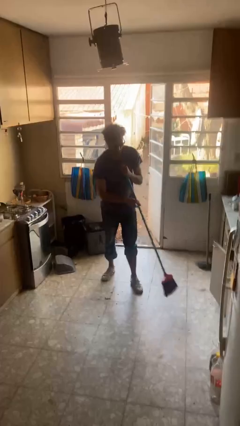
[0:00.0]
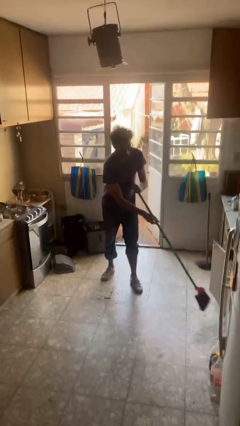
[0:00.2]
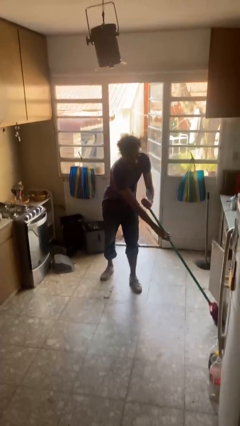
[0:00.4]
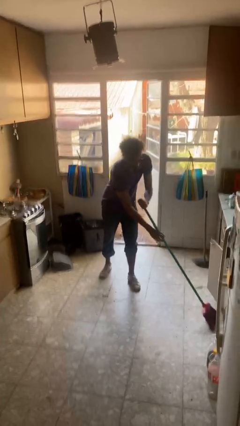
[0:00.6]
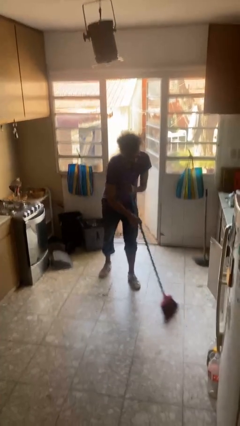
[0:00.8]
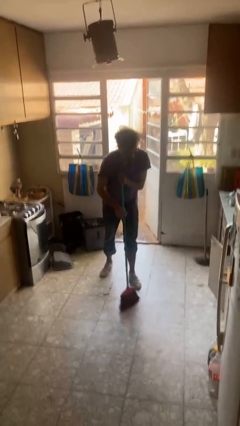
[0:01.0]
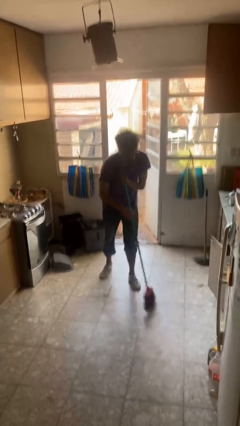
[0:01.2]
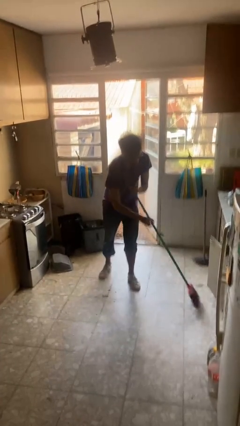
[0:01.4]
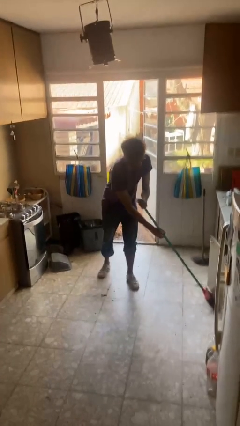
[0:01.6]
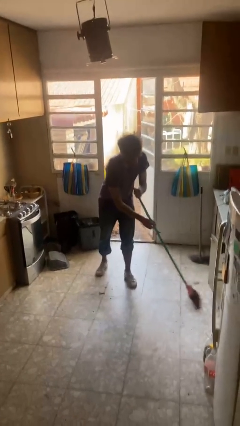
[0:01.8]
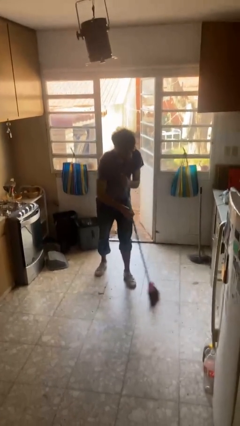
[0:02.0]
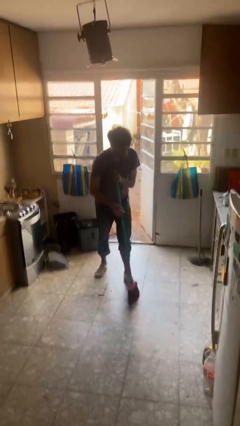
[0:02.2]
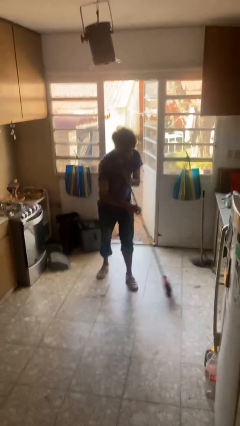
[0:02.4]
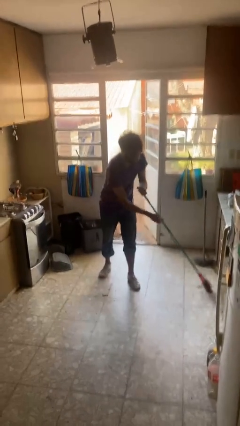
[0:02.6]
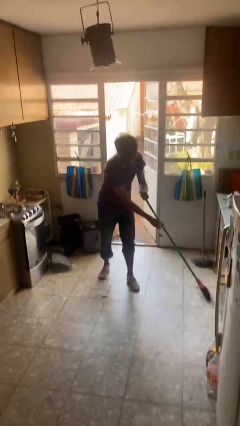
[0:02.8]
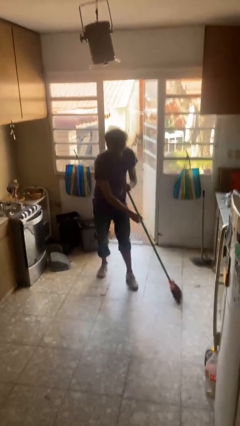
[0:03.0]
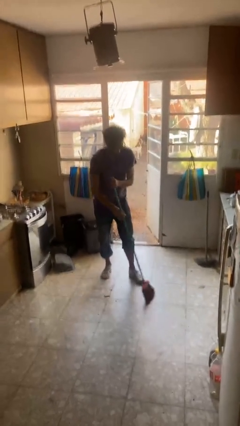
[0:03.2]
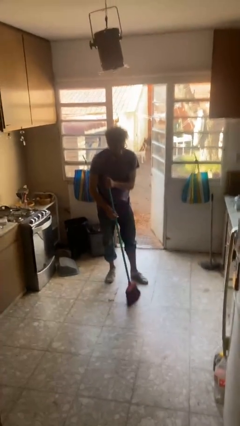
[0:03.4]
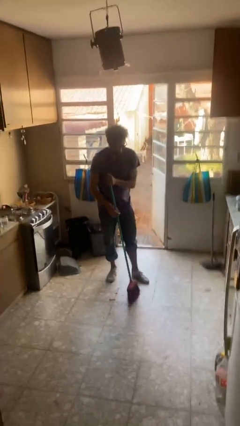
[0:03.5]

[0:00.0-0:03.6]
person sweeps floor

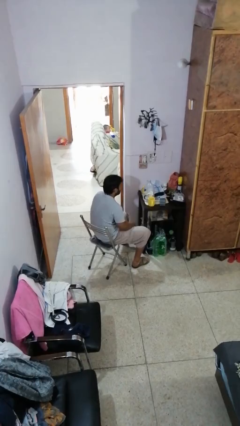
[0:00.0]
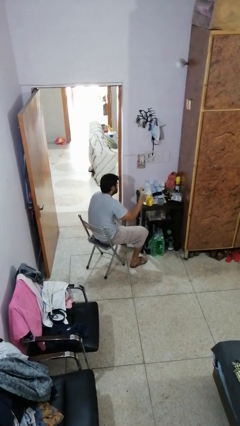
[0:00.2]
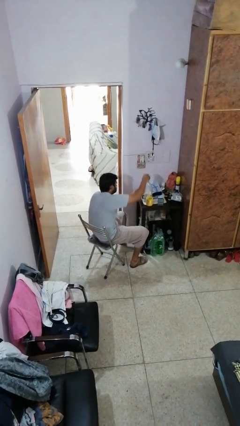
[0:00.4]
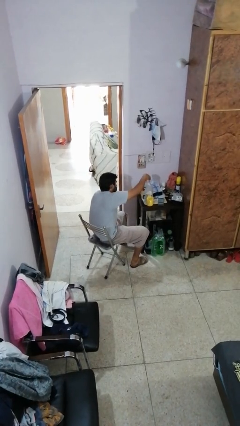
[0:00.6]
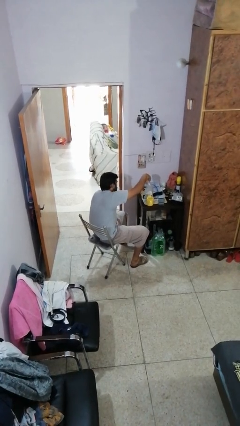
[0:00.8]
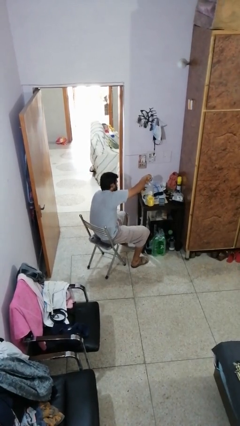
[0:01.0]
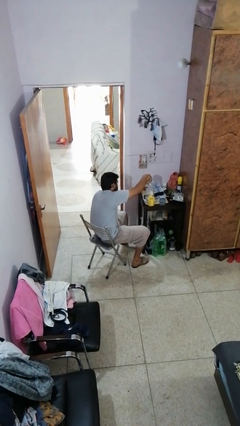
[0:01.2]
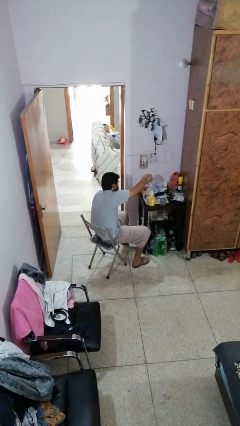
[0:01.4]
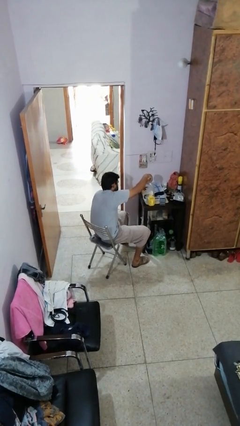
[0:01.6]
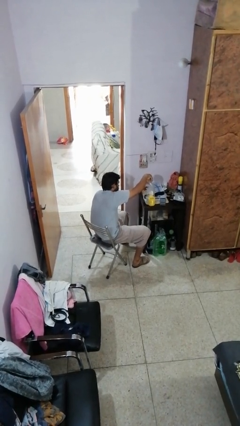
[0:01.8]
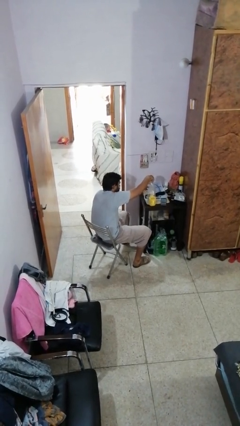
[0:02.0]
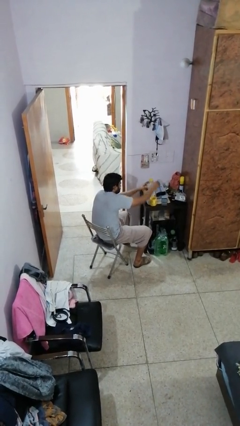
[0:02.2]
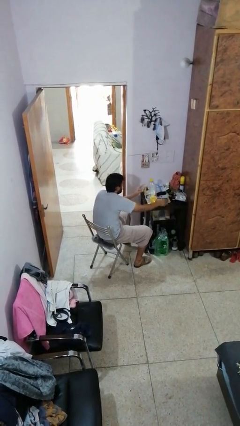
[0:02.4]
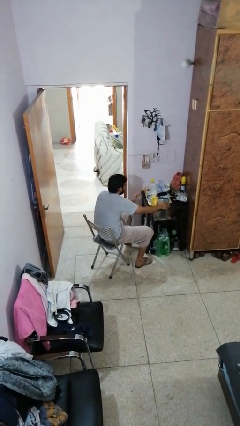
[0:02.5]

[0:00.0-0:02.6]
person screws lid to bottle

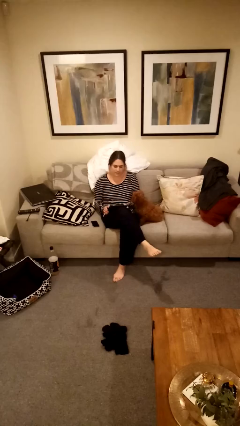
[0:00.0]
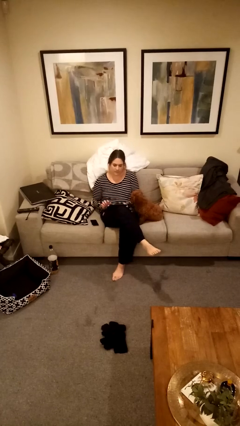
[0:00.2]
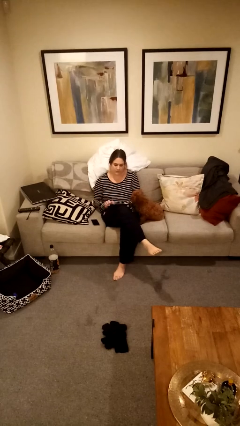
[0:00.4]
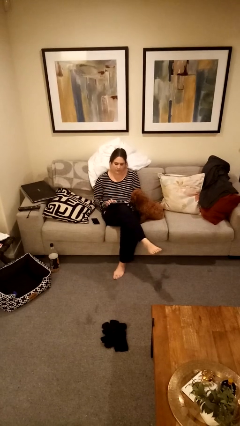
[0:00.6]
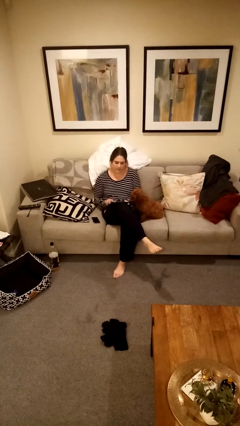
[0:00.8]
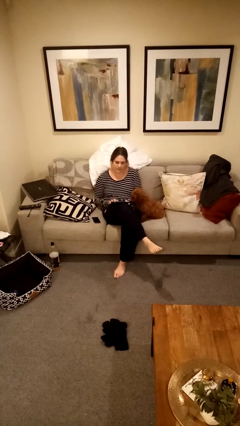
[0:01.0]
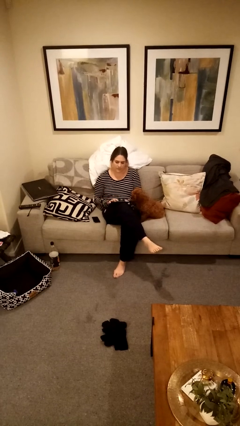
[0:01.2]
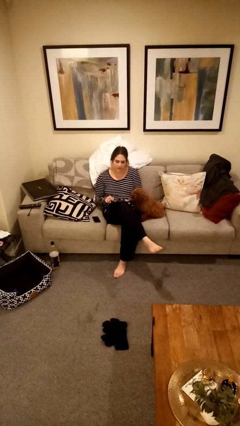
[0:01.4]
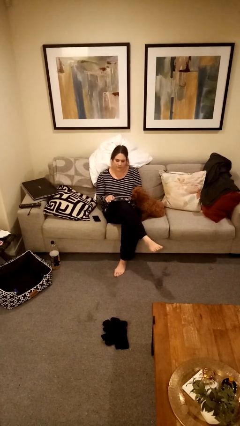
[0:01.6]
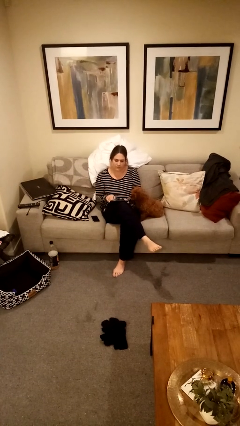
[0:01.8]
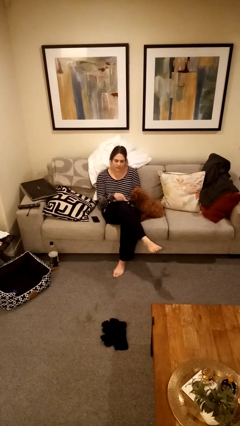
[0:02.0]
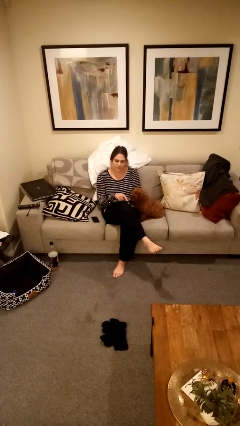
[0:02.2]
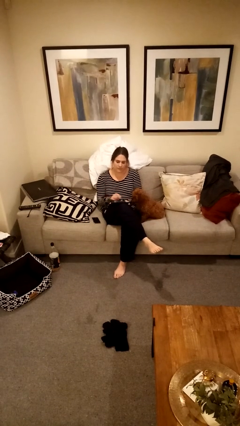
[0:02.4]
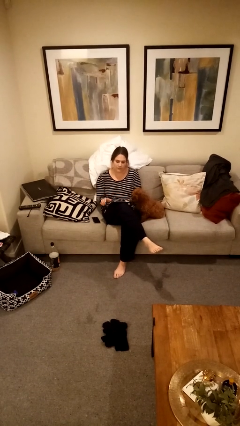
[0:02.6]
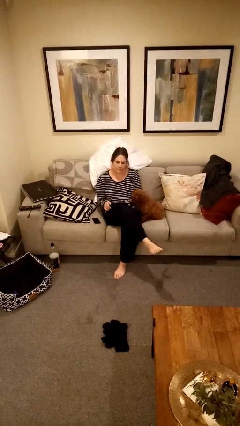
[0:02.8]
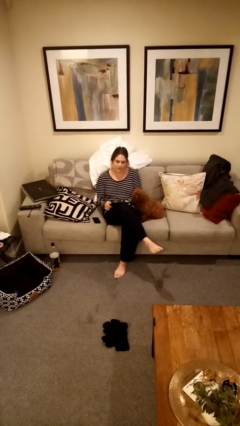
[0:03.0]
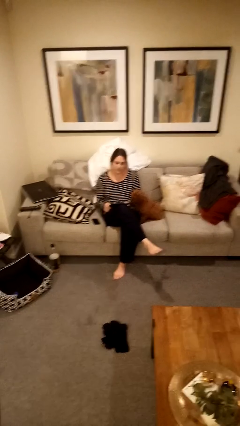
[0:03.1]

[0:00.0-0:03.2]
person interacts with tablet

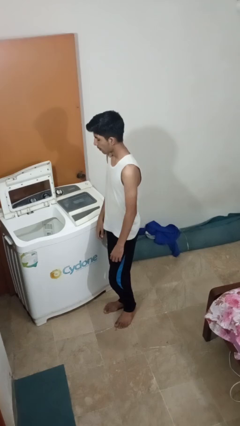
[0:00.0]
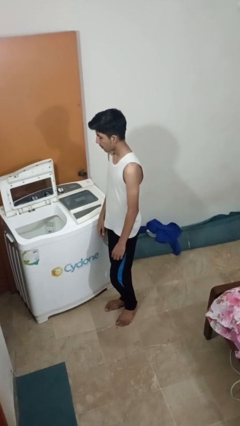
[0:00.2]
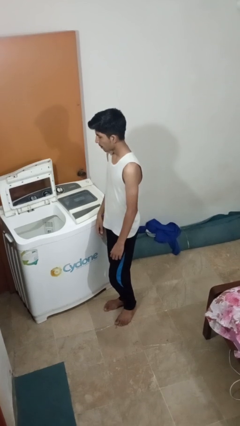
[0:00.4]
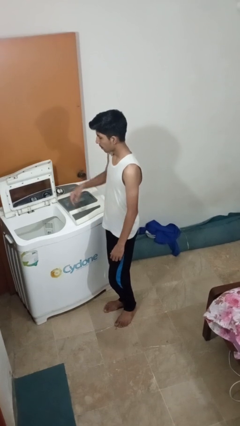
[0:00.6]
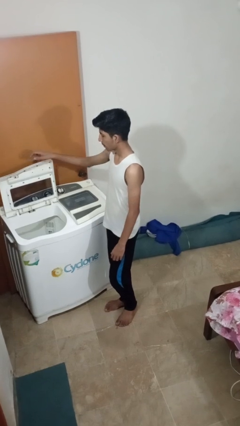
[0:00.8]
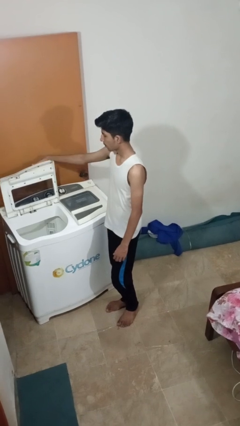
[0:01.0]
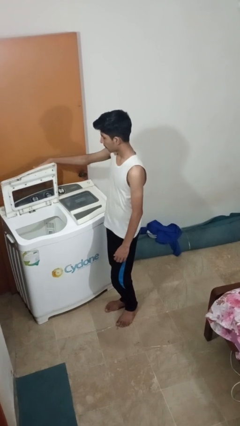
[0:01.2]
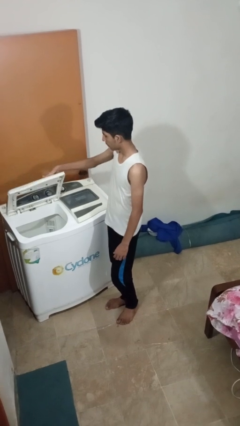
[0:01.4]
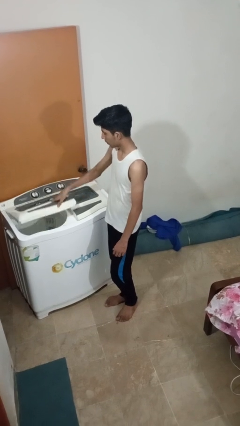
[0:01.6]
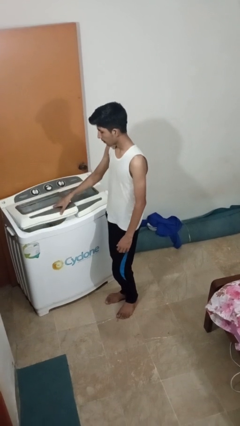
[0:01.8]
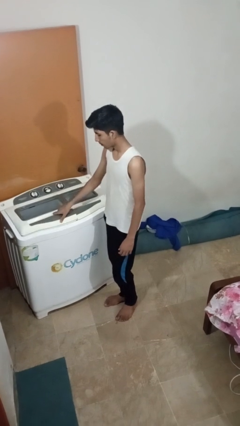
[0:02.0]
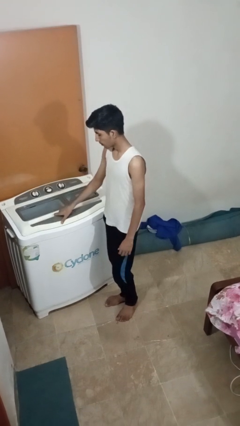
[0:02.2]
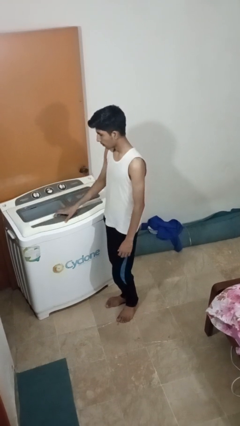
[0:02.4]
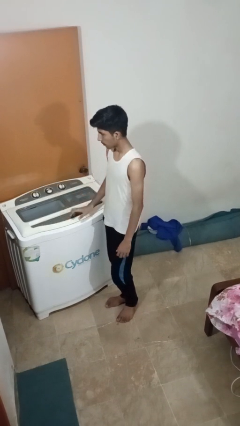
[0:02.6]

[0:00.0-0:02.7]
person closes clothes washer

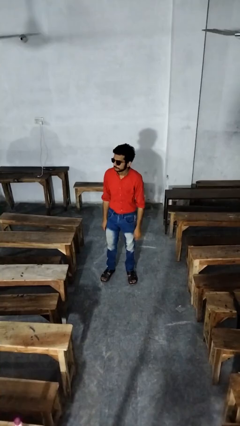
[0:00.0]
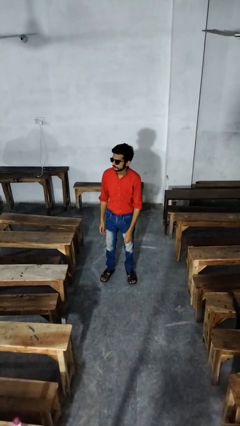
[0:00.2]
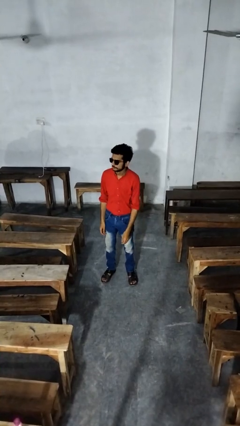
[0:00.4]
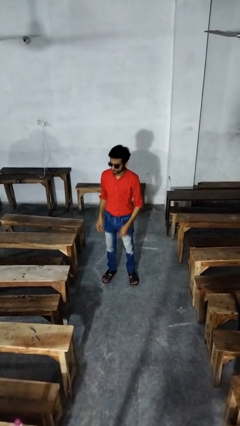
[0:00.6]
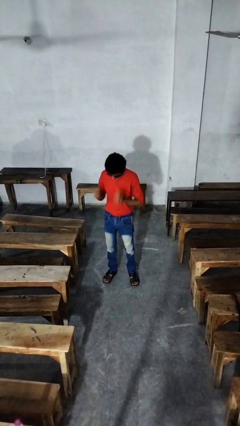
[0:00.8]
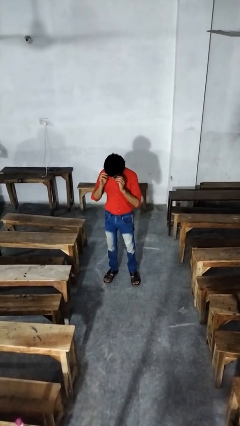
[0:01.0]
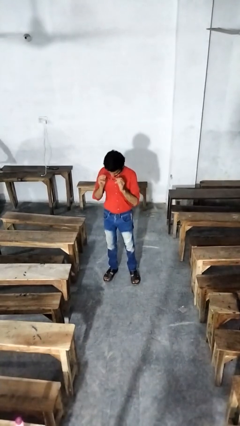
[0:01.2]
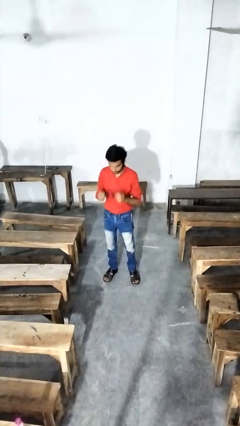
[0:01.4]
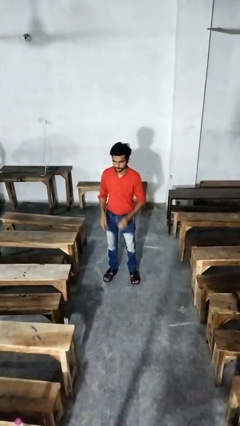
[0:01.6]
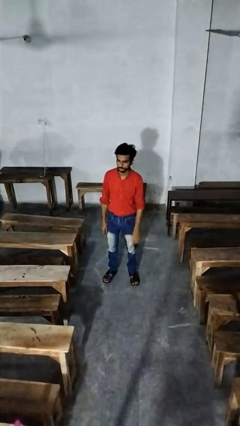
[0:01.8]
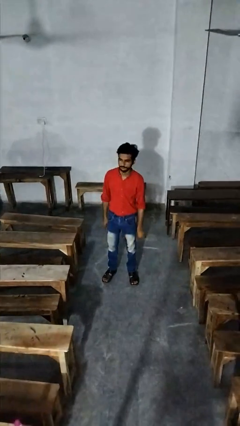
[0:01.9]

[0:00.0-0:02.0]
person takes off sunglasses

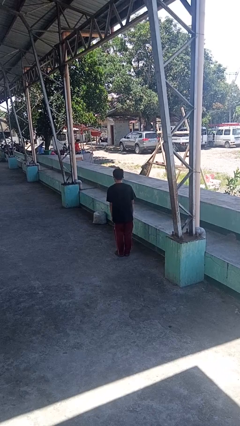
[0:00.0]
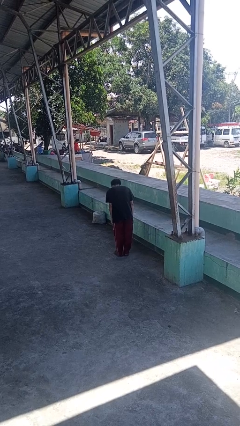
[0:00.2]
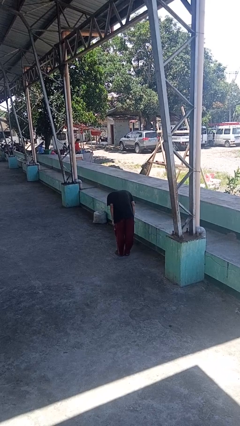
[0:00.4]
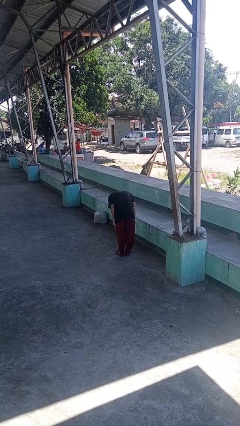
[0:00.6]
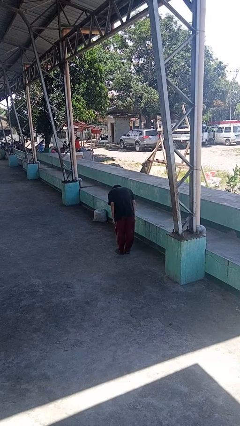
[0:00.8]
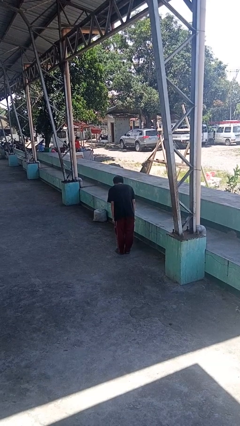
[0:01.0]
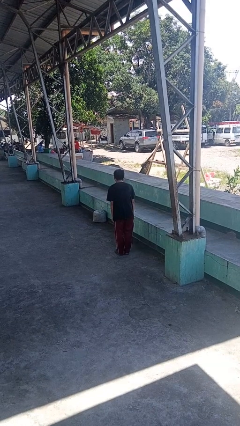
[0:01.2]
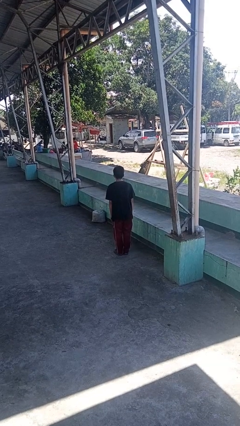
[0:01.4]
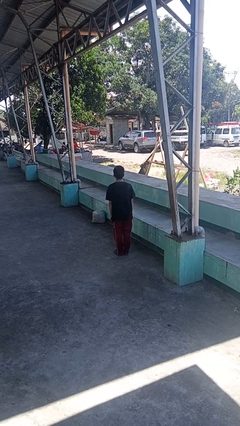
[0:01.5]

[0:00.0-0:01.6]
person bows

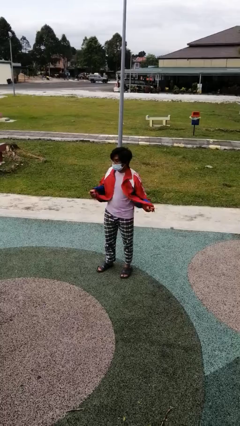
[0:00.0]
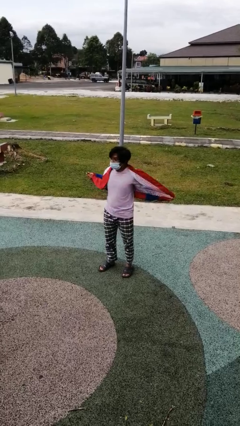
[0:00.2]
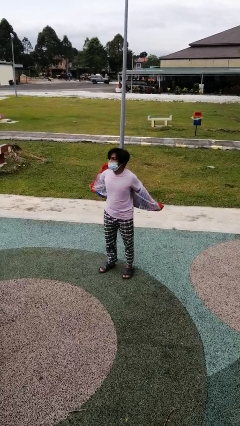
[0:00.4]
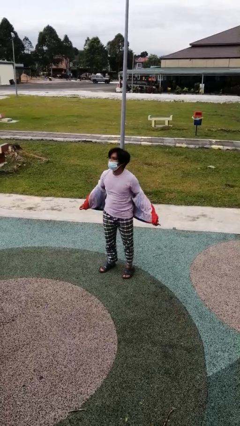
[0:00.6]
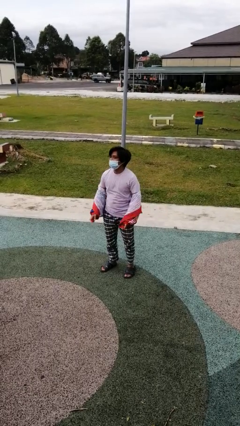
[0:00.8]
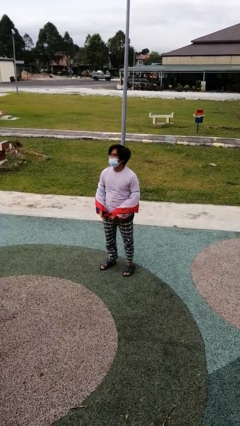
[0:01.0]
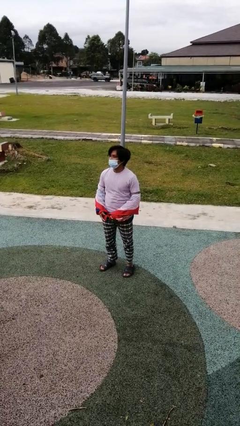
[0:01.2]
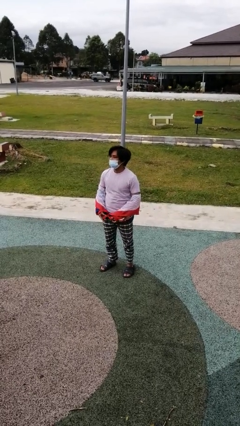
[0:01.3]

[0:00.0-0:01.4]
person takes off jacket
